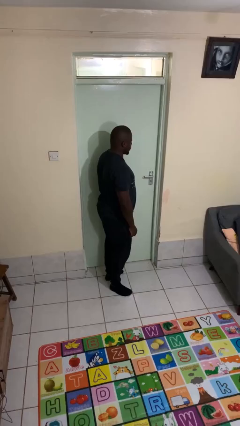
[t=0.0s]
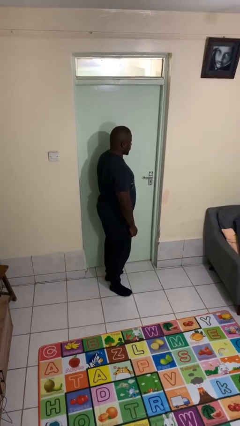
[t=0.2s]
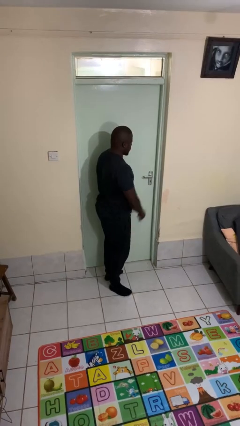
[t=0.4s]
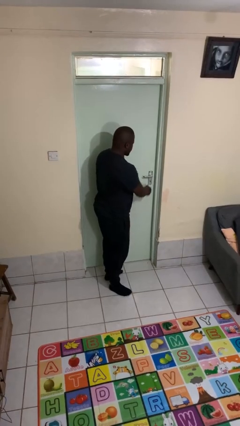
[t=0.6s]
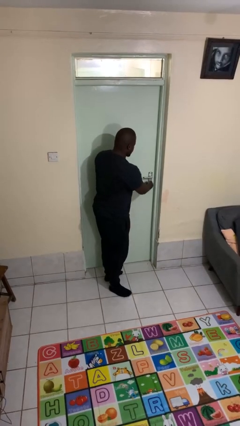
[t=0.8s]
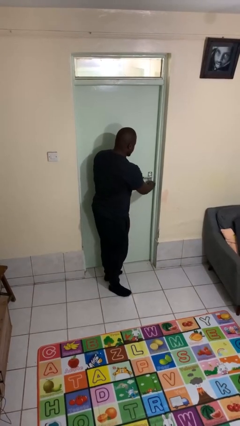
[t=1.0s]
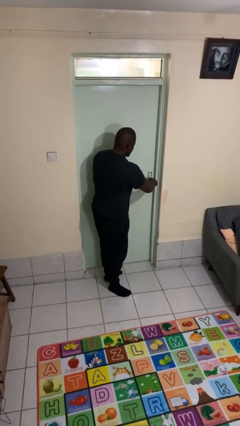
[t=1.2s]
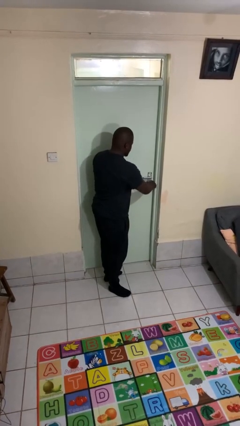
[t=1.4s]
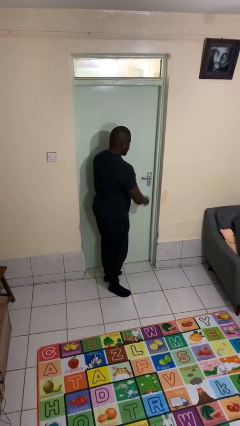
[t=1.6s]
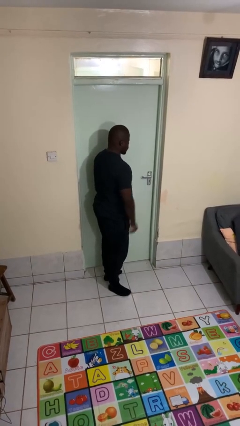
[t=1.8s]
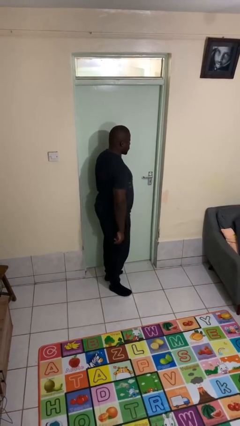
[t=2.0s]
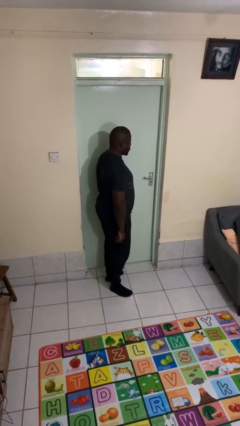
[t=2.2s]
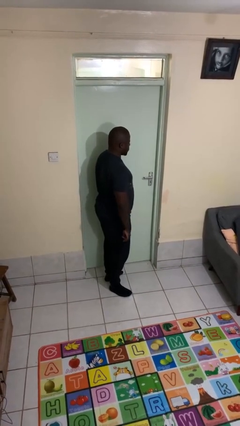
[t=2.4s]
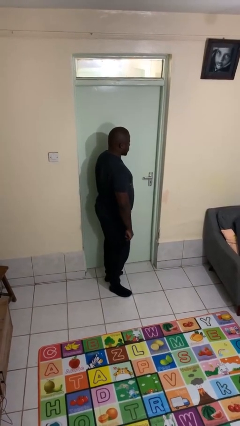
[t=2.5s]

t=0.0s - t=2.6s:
person unlocks door with keys

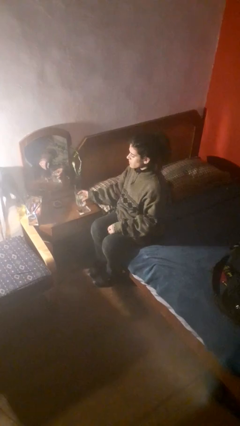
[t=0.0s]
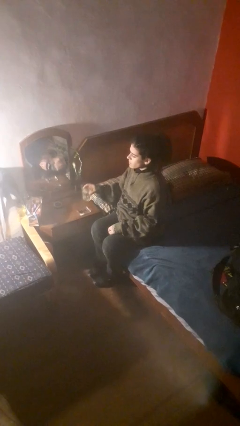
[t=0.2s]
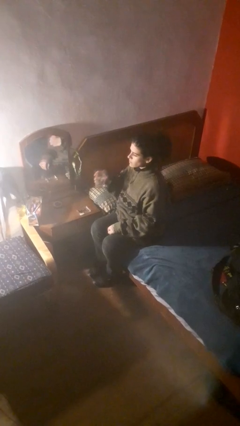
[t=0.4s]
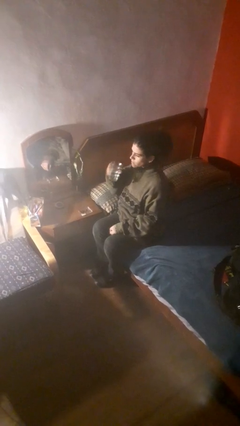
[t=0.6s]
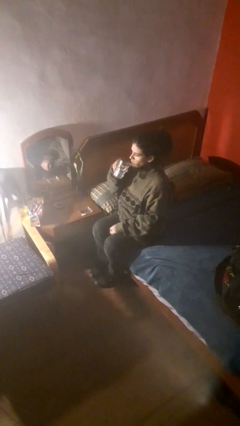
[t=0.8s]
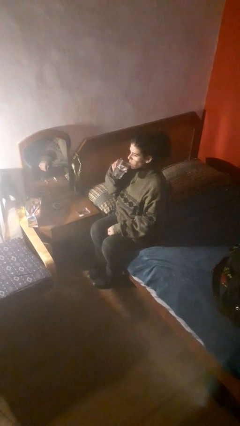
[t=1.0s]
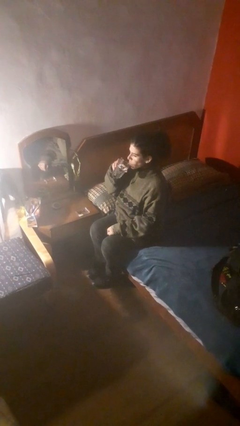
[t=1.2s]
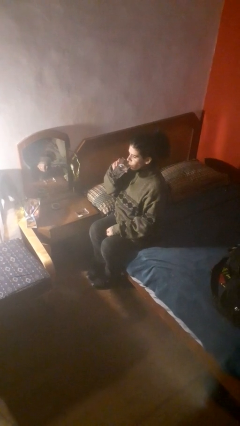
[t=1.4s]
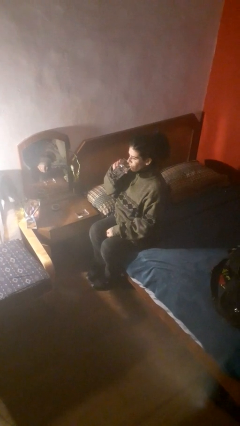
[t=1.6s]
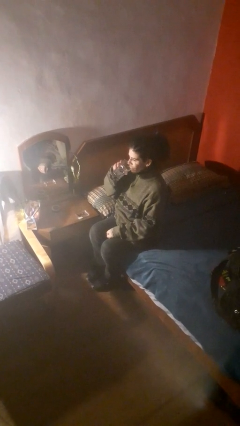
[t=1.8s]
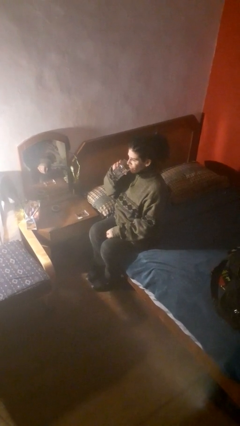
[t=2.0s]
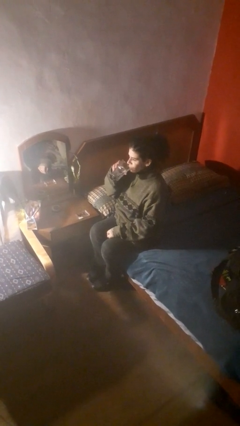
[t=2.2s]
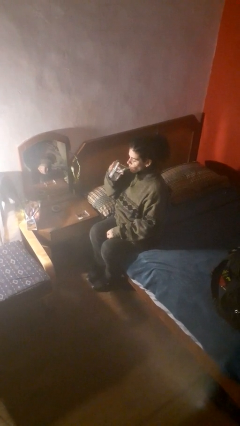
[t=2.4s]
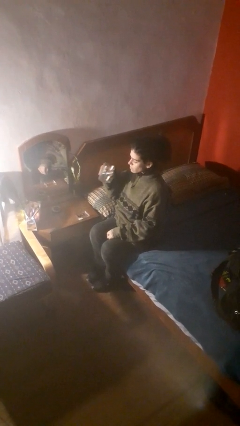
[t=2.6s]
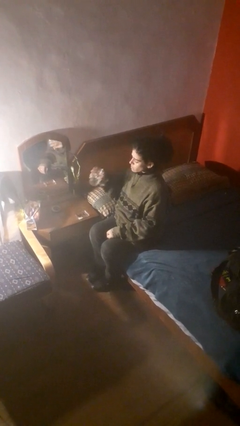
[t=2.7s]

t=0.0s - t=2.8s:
person drinks from cup

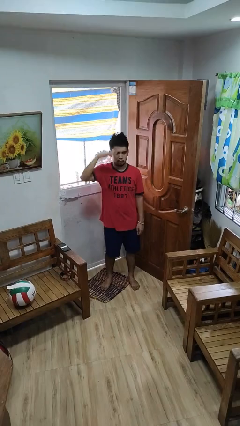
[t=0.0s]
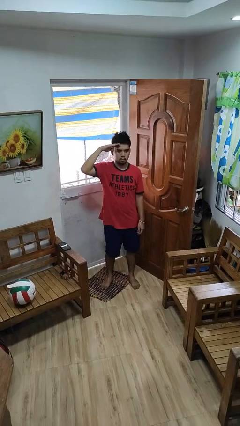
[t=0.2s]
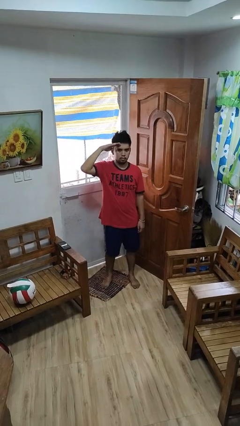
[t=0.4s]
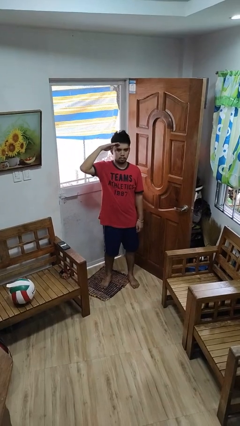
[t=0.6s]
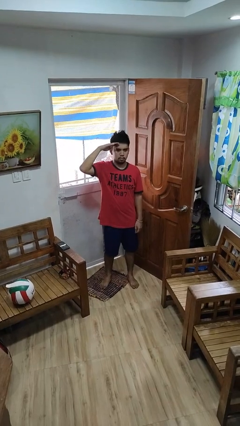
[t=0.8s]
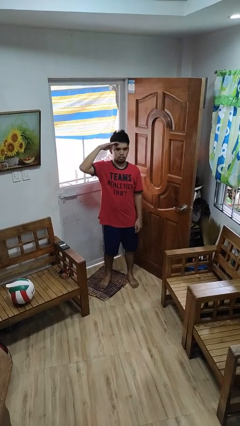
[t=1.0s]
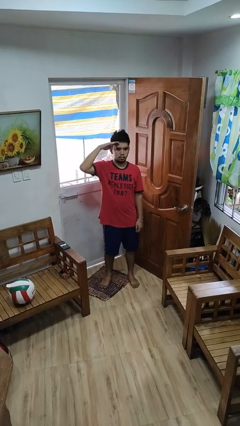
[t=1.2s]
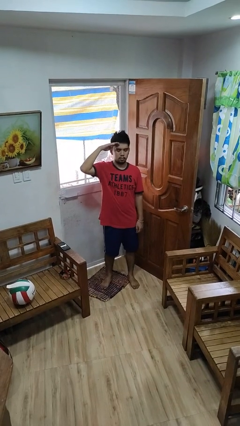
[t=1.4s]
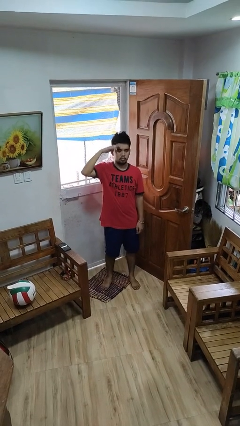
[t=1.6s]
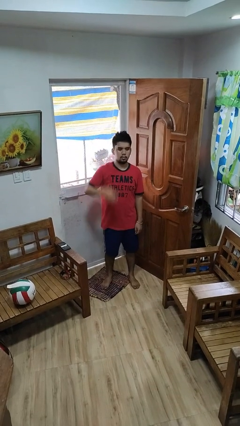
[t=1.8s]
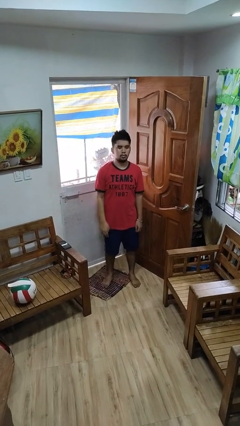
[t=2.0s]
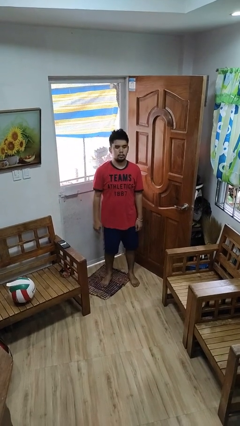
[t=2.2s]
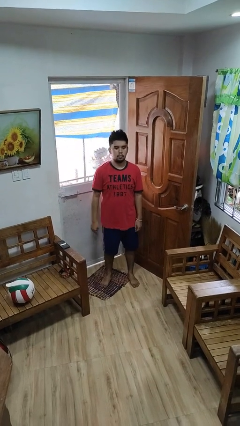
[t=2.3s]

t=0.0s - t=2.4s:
person salutes

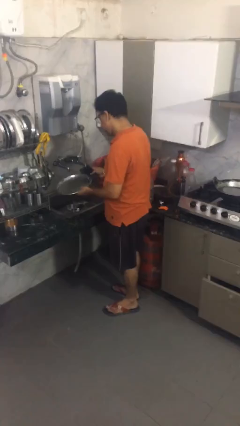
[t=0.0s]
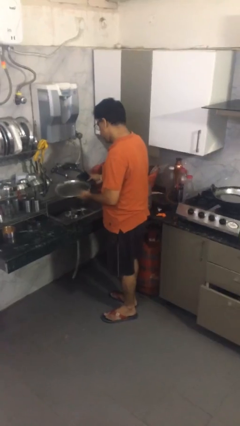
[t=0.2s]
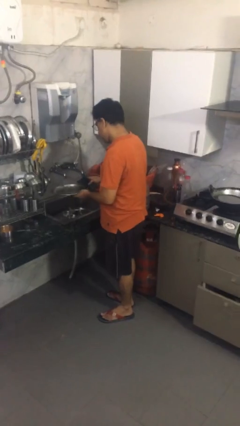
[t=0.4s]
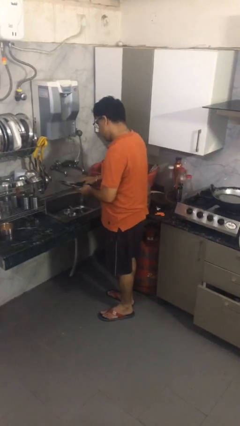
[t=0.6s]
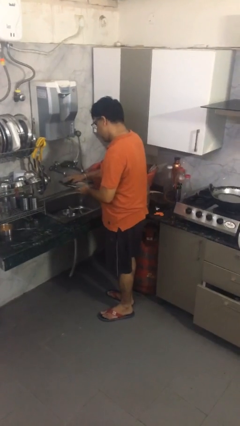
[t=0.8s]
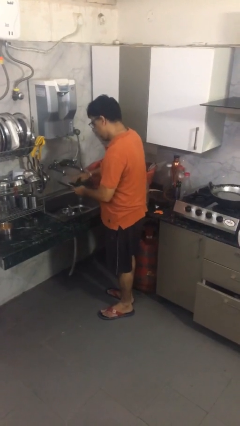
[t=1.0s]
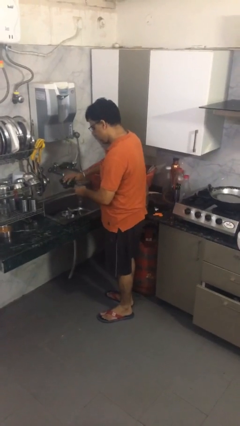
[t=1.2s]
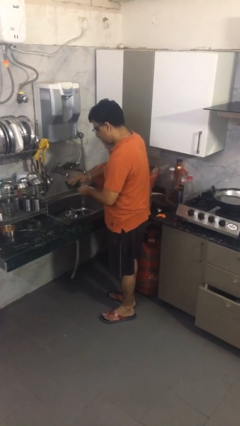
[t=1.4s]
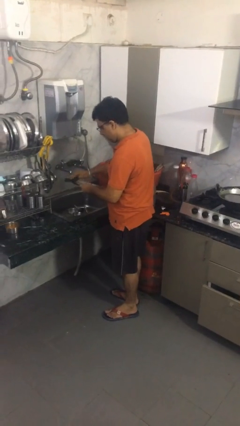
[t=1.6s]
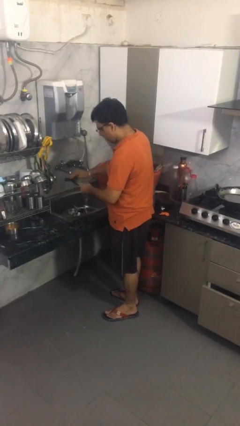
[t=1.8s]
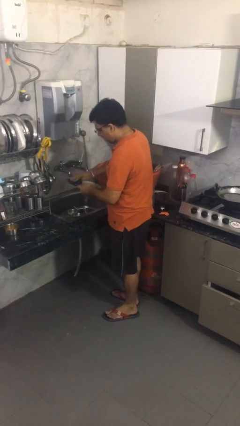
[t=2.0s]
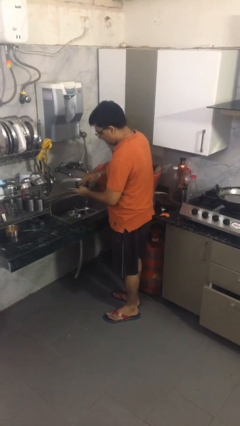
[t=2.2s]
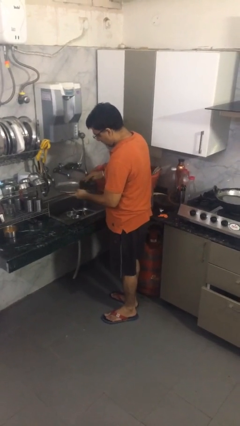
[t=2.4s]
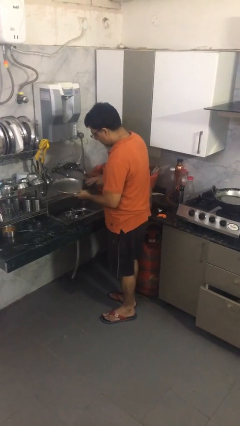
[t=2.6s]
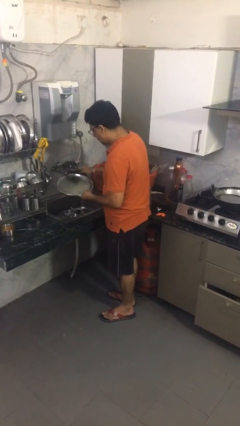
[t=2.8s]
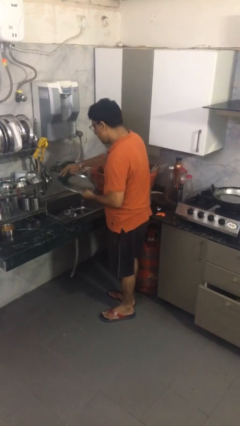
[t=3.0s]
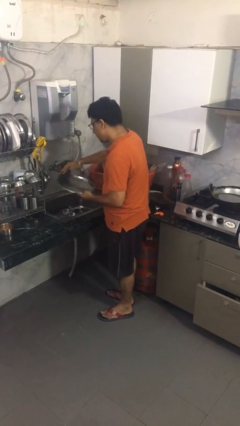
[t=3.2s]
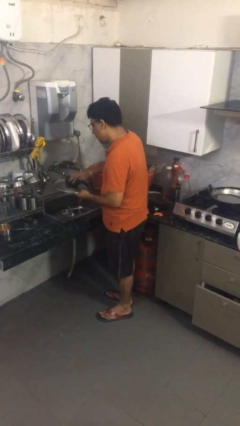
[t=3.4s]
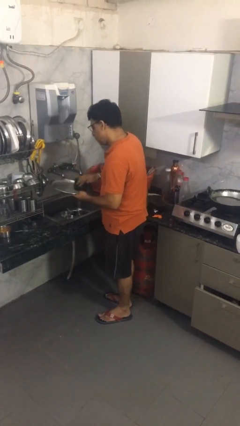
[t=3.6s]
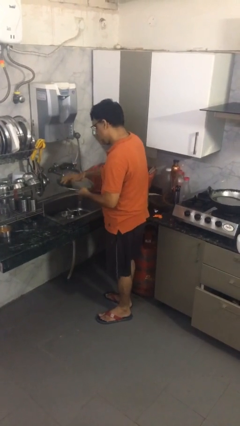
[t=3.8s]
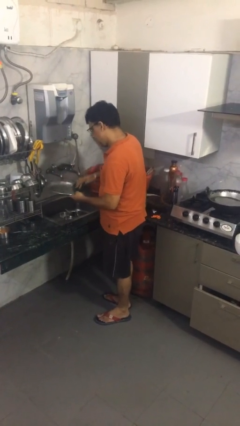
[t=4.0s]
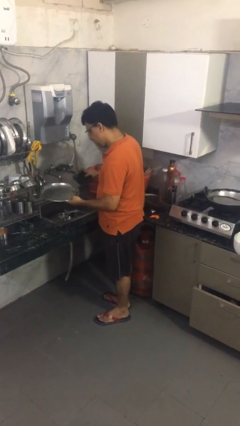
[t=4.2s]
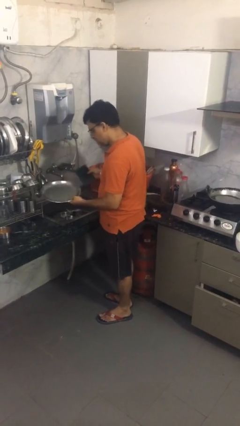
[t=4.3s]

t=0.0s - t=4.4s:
person washes dish

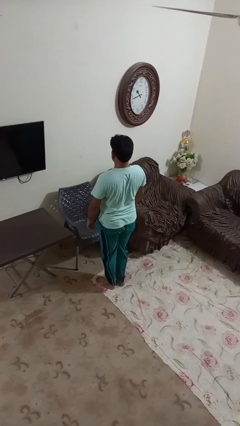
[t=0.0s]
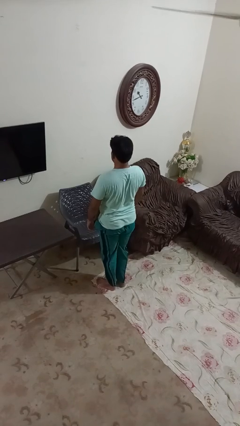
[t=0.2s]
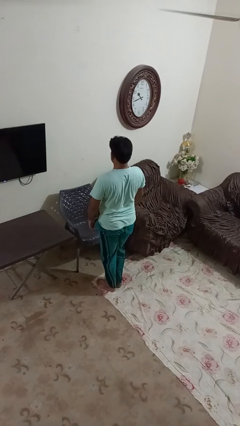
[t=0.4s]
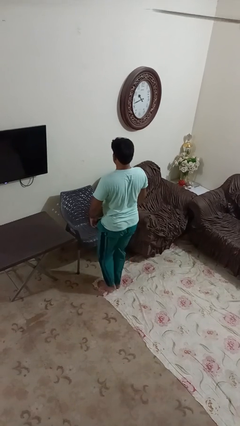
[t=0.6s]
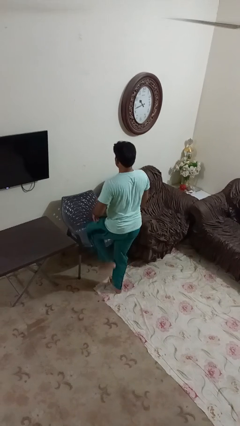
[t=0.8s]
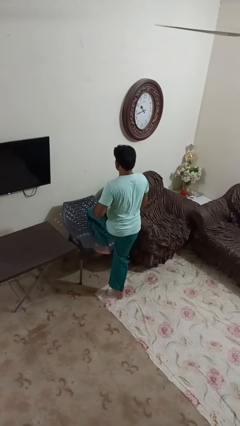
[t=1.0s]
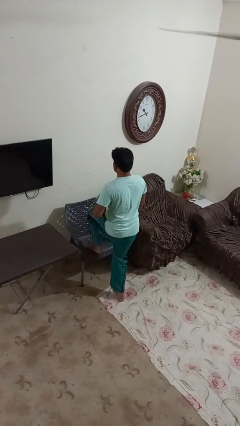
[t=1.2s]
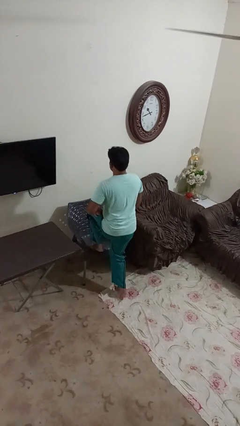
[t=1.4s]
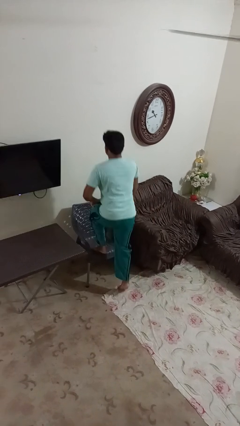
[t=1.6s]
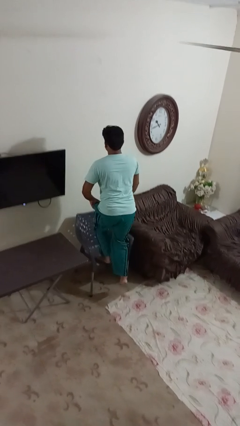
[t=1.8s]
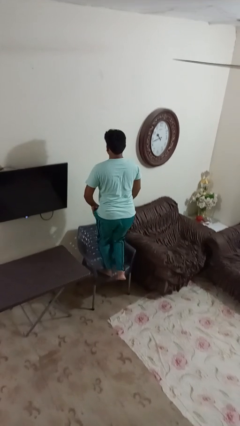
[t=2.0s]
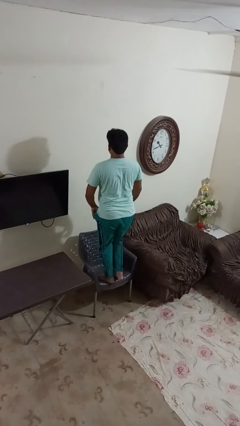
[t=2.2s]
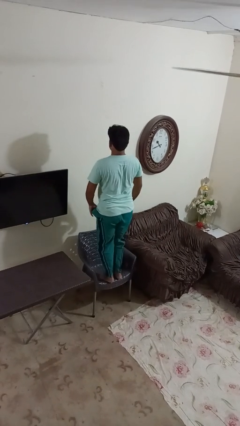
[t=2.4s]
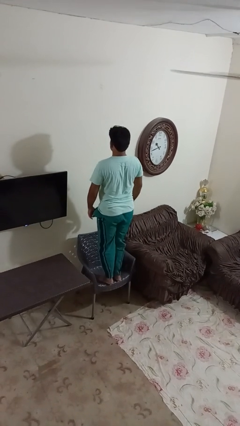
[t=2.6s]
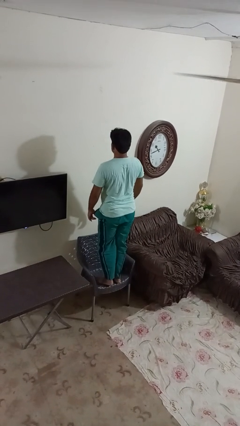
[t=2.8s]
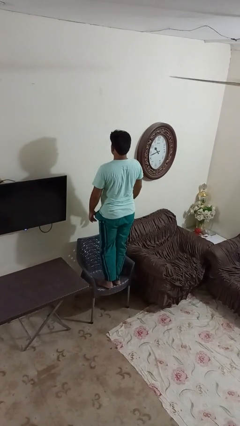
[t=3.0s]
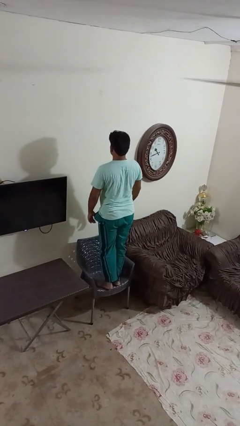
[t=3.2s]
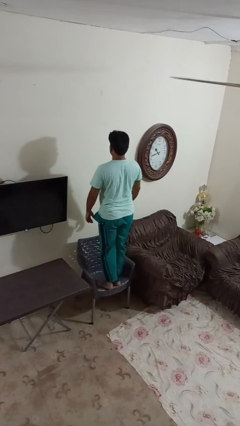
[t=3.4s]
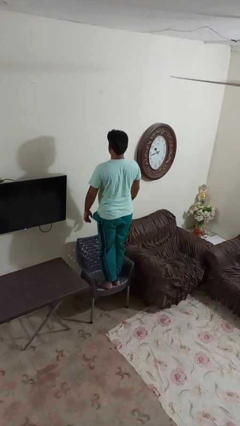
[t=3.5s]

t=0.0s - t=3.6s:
person climbs on chair

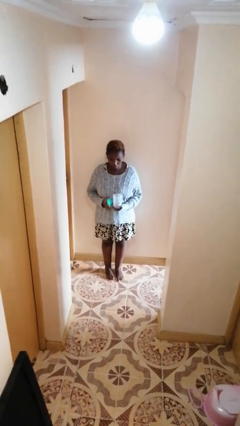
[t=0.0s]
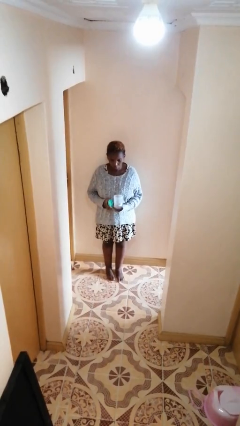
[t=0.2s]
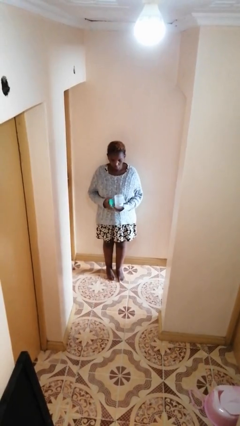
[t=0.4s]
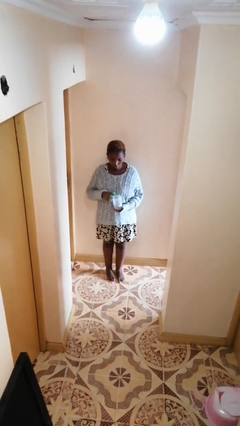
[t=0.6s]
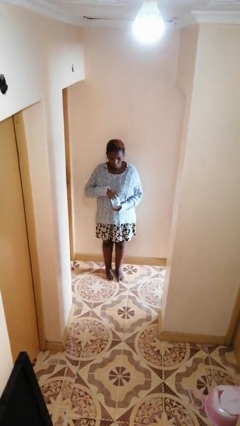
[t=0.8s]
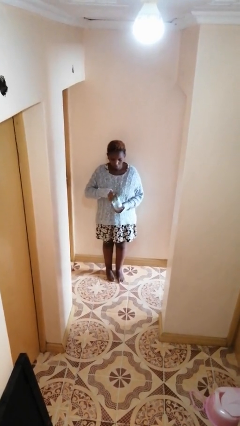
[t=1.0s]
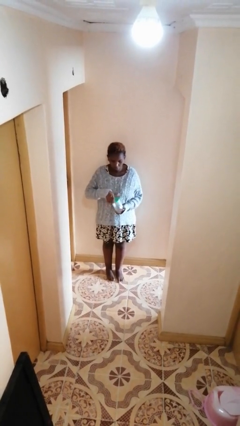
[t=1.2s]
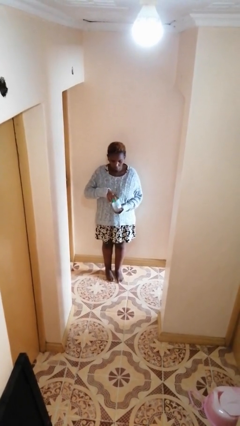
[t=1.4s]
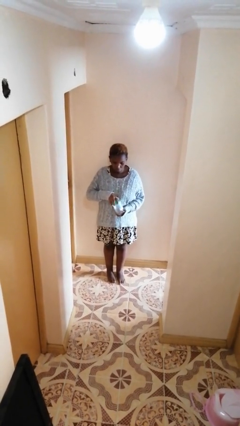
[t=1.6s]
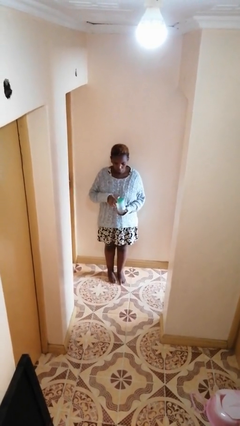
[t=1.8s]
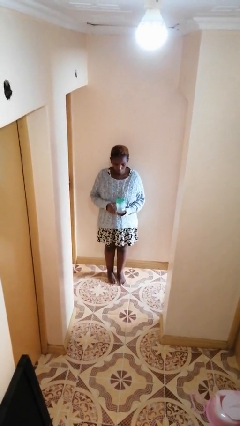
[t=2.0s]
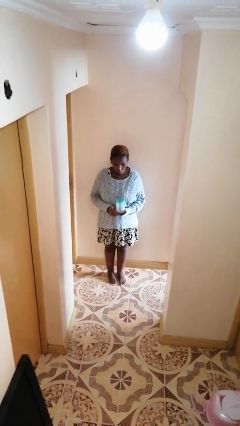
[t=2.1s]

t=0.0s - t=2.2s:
person closes jar
